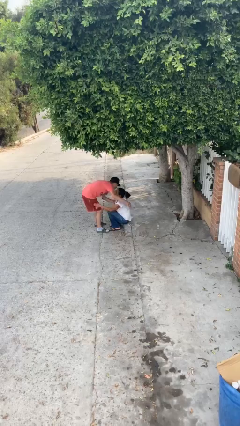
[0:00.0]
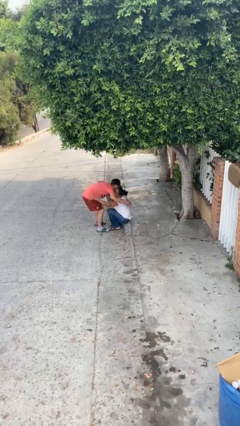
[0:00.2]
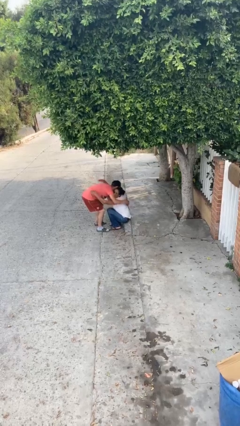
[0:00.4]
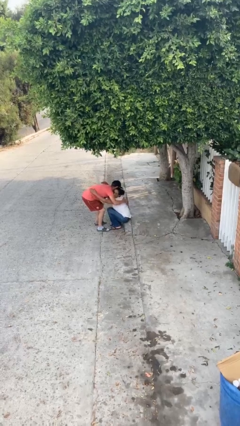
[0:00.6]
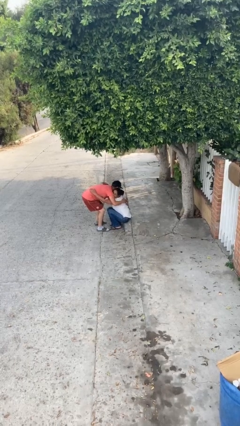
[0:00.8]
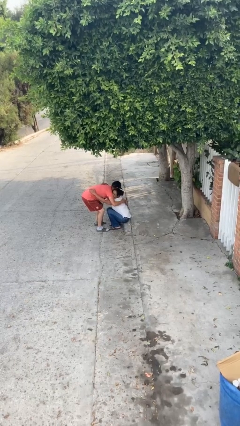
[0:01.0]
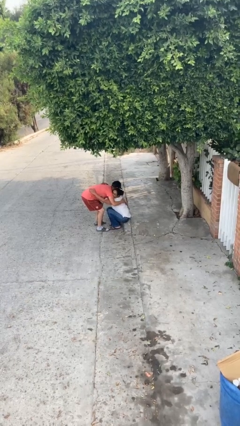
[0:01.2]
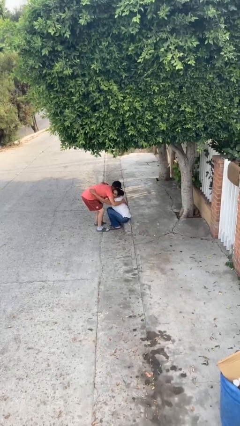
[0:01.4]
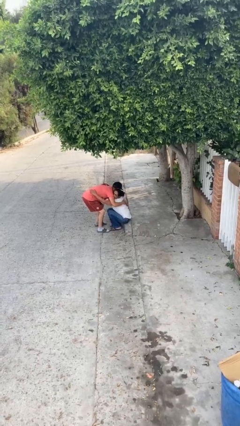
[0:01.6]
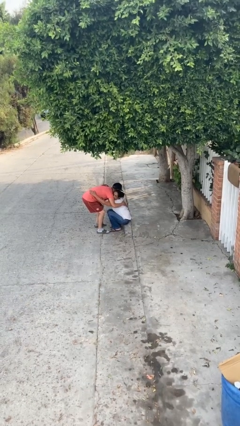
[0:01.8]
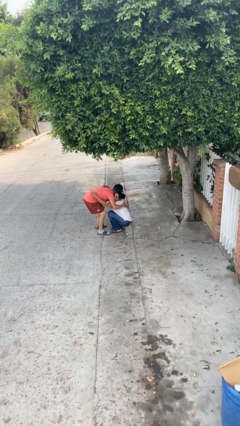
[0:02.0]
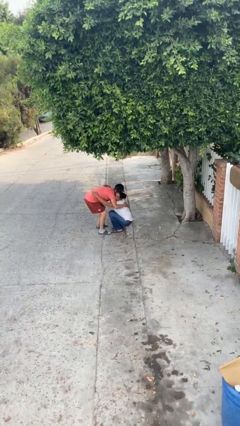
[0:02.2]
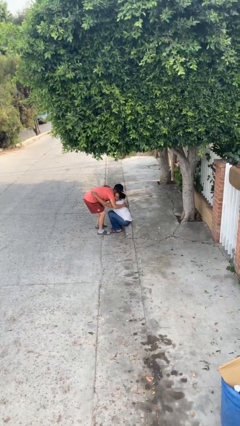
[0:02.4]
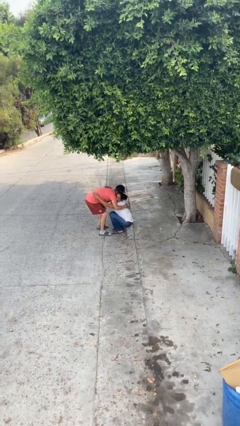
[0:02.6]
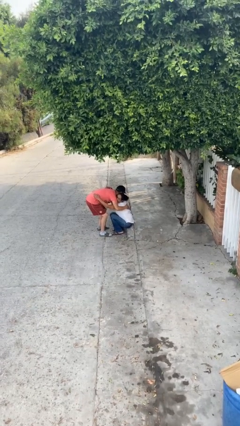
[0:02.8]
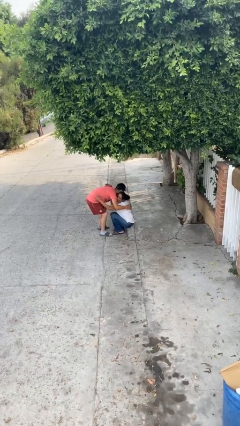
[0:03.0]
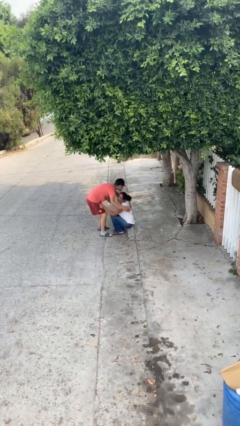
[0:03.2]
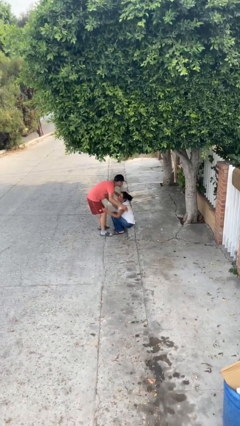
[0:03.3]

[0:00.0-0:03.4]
person embraces person

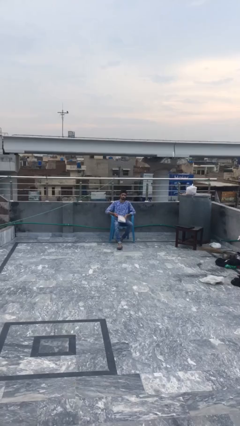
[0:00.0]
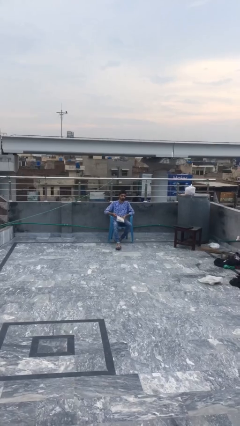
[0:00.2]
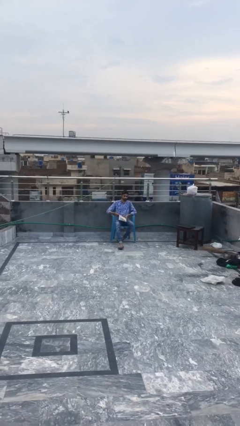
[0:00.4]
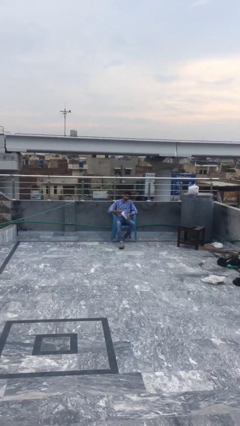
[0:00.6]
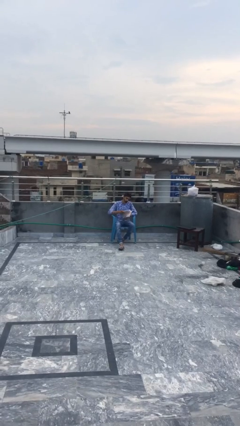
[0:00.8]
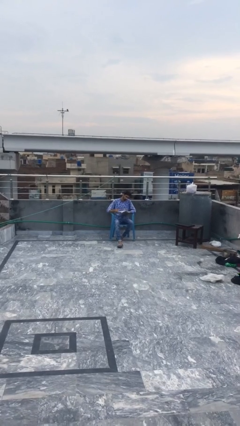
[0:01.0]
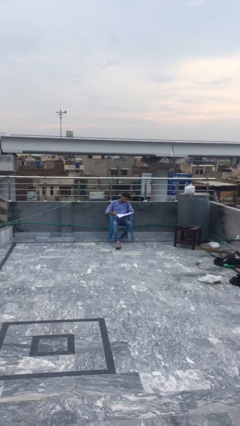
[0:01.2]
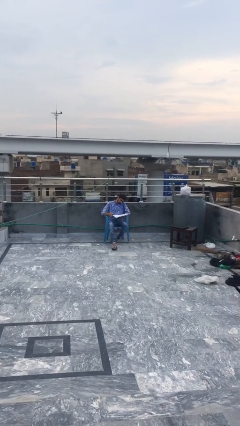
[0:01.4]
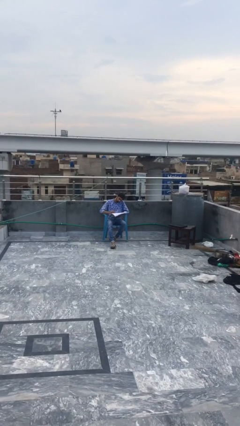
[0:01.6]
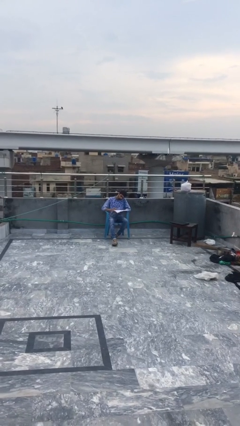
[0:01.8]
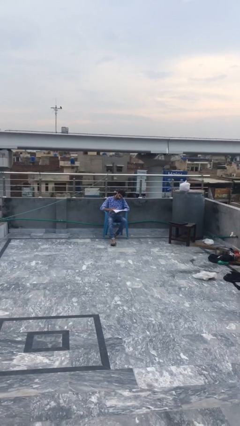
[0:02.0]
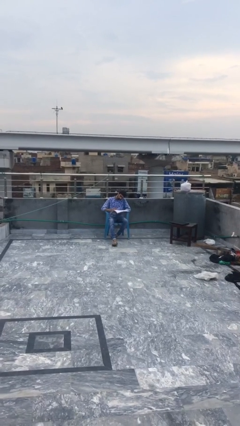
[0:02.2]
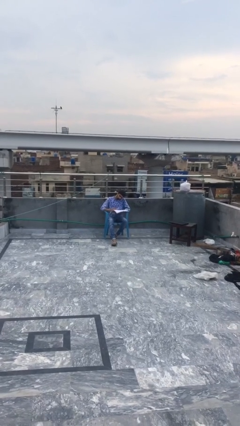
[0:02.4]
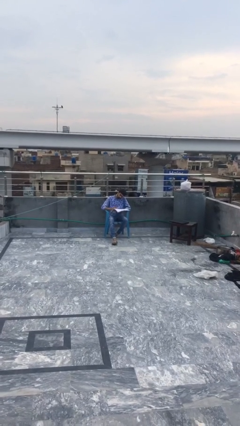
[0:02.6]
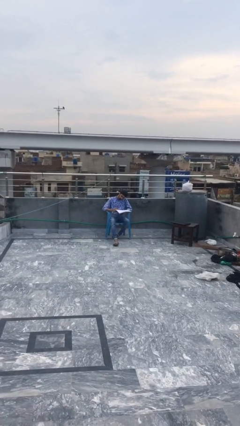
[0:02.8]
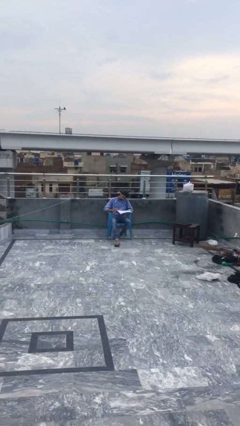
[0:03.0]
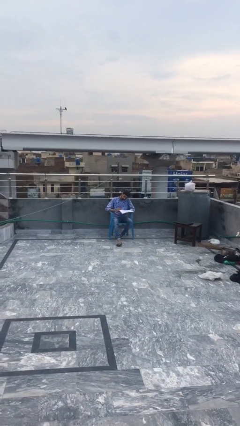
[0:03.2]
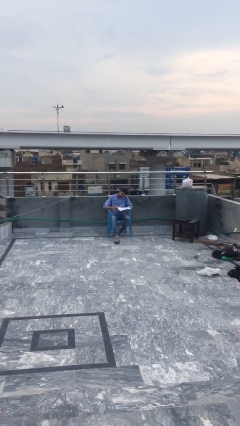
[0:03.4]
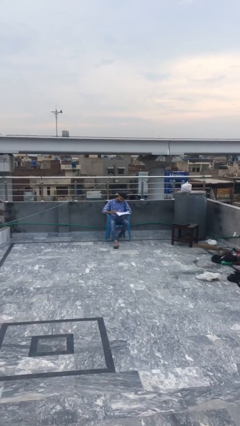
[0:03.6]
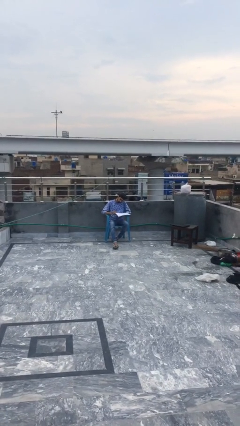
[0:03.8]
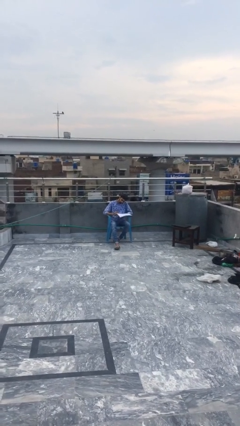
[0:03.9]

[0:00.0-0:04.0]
person reads document

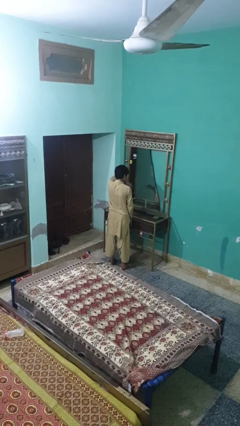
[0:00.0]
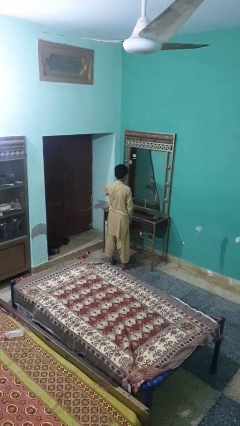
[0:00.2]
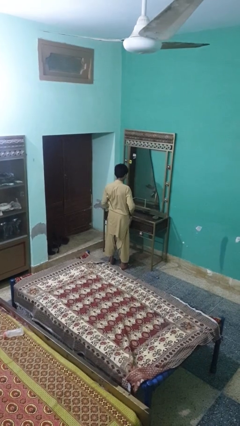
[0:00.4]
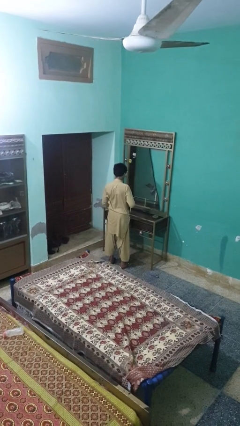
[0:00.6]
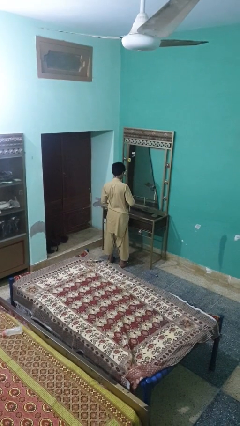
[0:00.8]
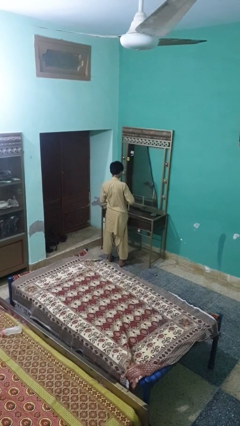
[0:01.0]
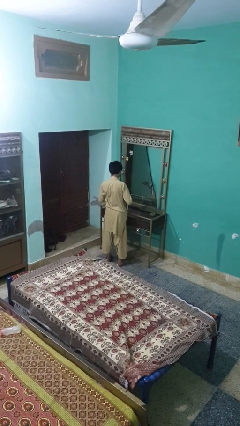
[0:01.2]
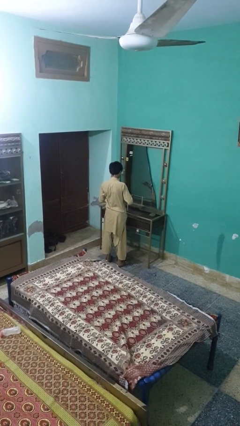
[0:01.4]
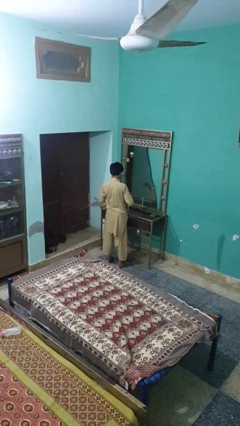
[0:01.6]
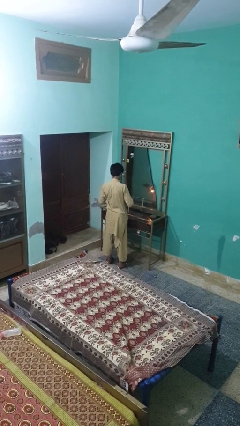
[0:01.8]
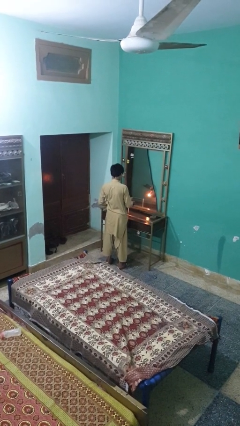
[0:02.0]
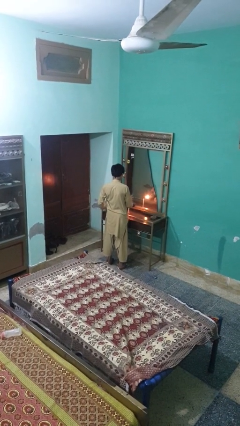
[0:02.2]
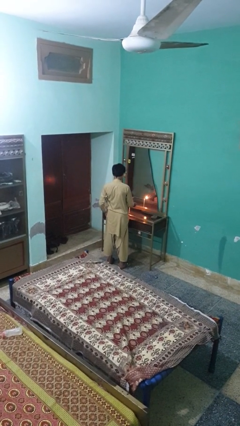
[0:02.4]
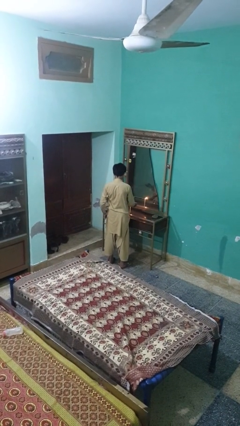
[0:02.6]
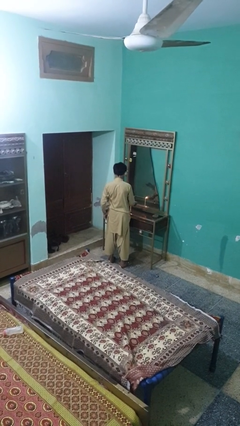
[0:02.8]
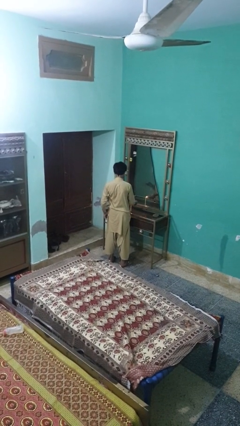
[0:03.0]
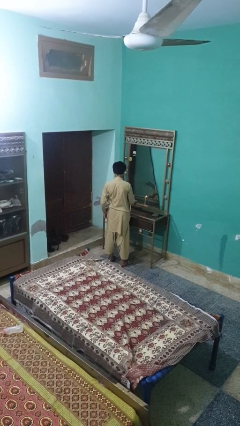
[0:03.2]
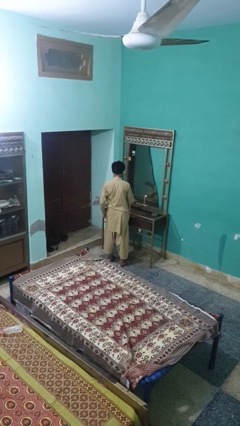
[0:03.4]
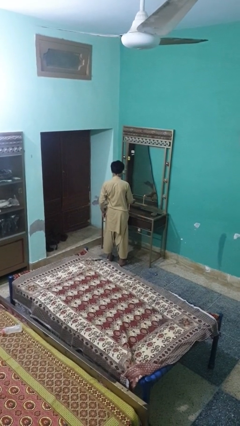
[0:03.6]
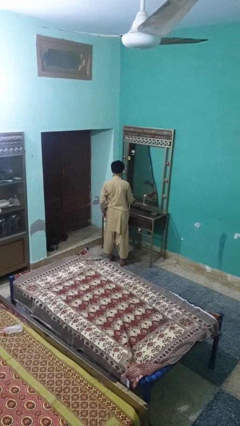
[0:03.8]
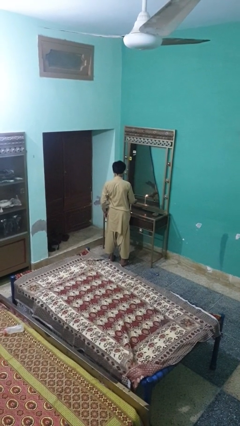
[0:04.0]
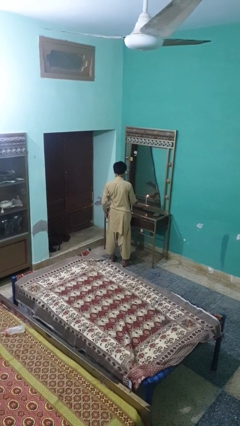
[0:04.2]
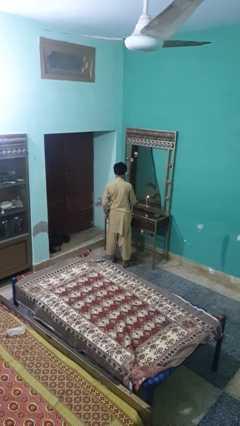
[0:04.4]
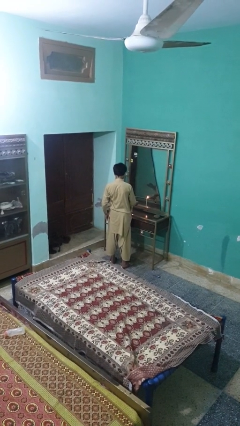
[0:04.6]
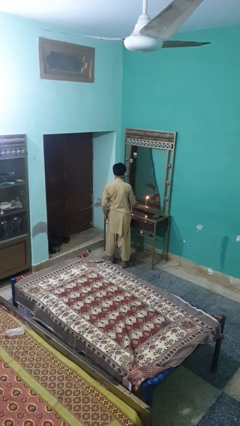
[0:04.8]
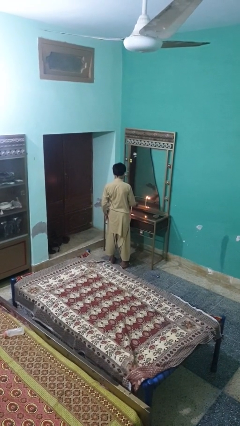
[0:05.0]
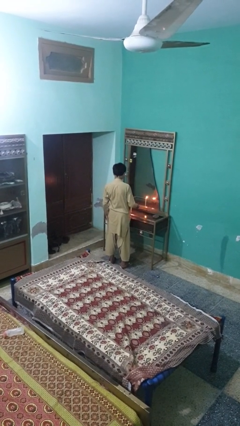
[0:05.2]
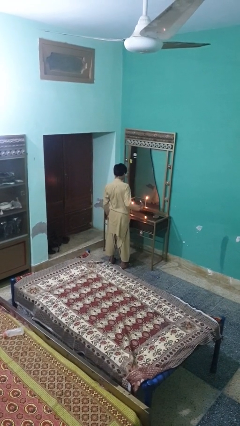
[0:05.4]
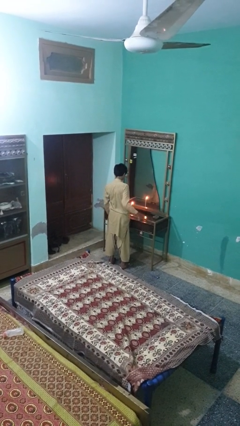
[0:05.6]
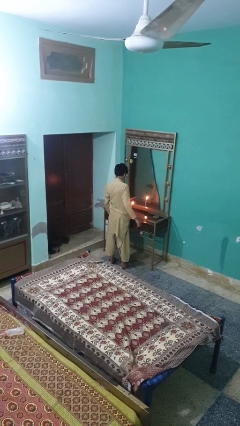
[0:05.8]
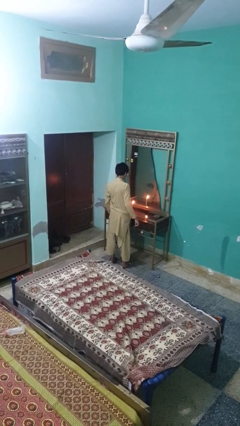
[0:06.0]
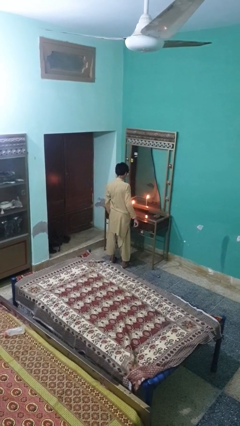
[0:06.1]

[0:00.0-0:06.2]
person lights candle

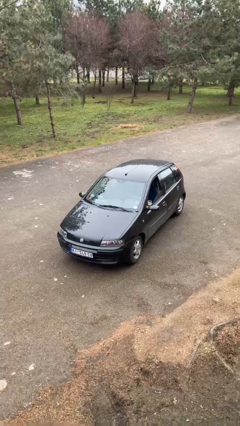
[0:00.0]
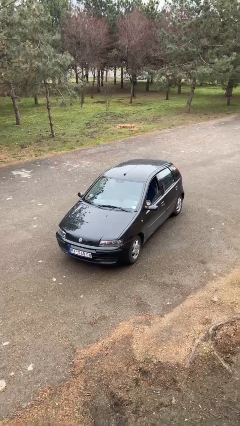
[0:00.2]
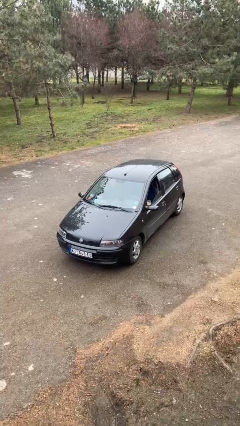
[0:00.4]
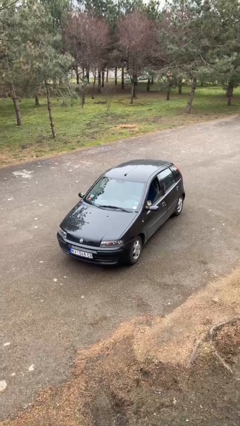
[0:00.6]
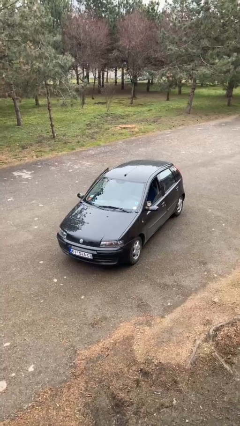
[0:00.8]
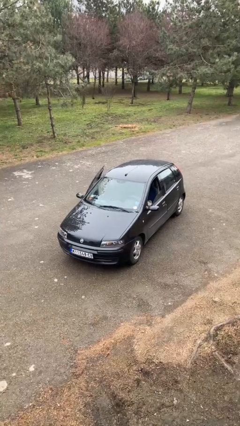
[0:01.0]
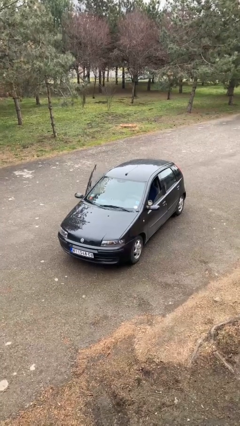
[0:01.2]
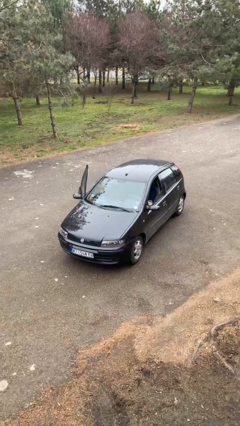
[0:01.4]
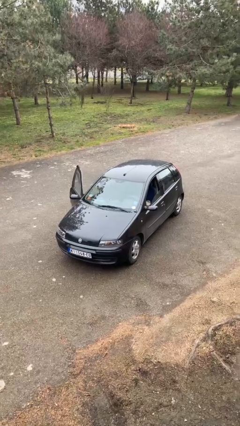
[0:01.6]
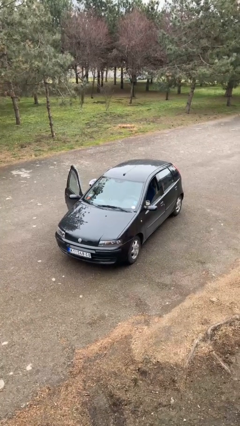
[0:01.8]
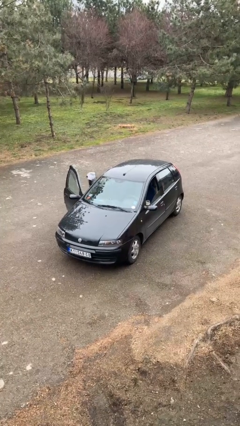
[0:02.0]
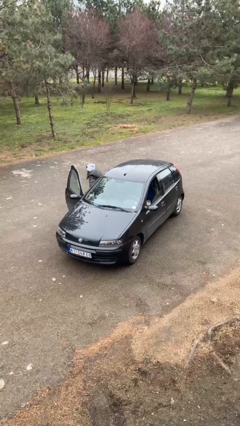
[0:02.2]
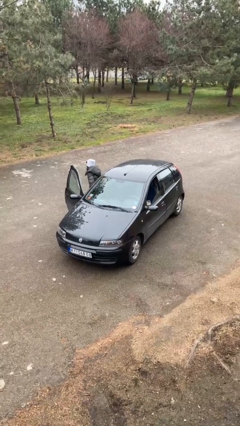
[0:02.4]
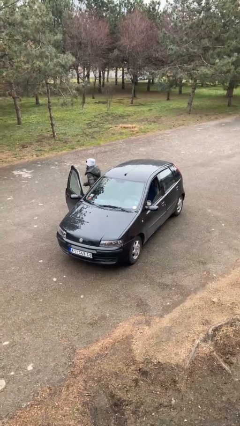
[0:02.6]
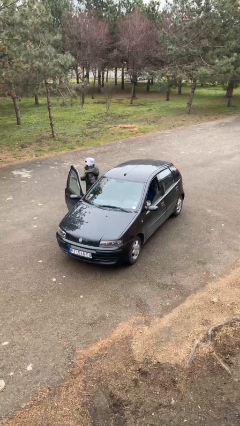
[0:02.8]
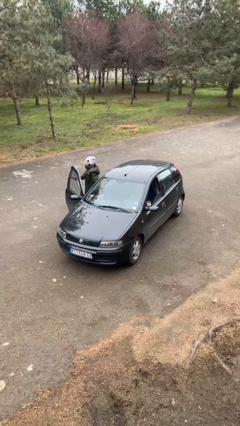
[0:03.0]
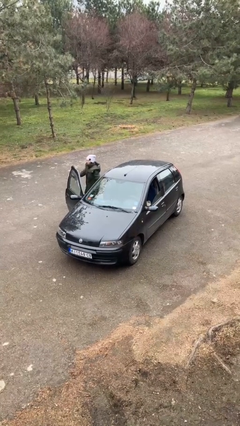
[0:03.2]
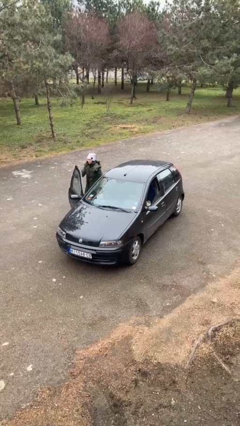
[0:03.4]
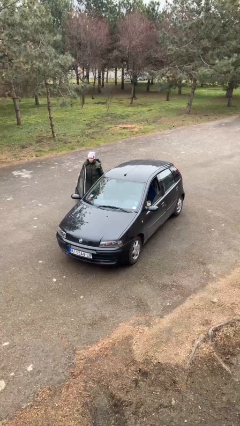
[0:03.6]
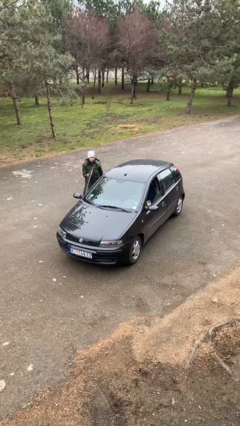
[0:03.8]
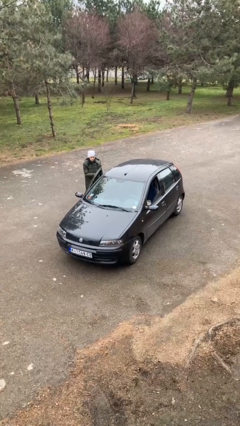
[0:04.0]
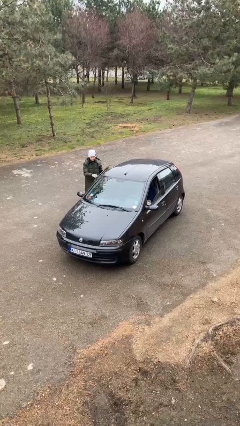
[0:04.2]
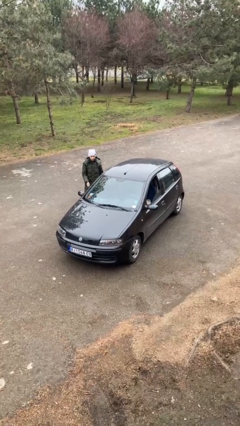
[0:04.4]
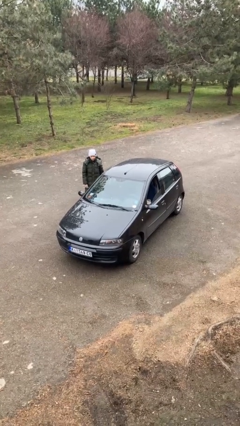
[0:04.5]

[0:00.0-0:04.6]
car drops off person
